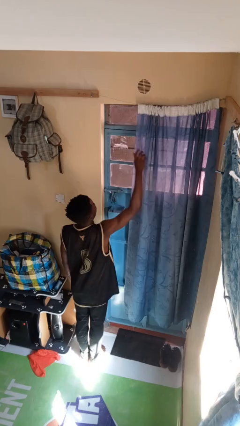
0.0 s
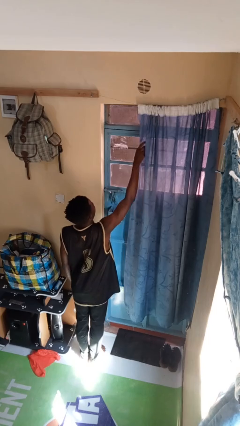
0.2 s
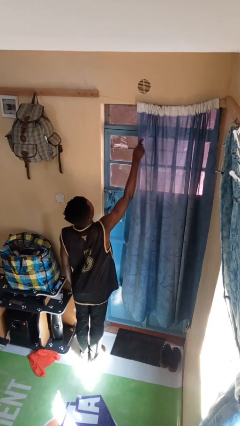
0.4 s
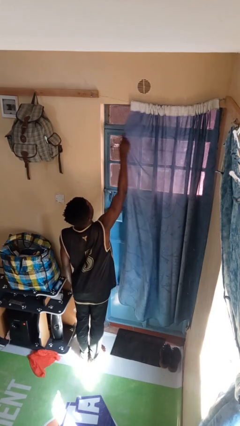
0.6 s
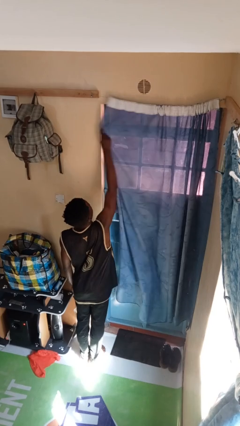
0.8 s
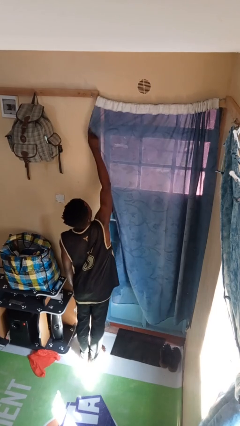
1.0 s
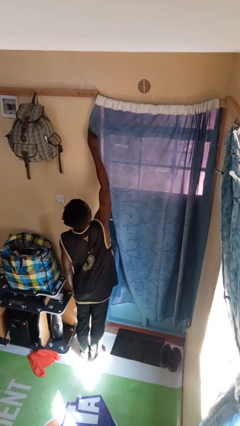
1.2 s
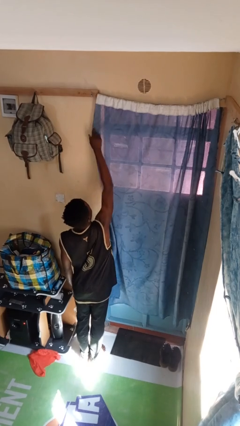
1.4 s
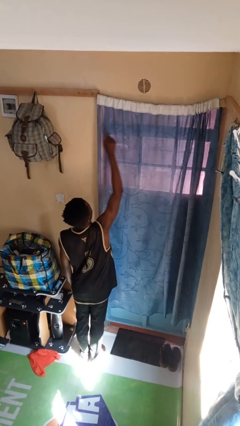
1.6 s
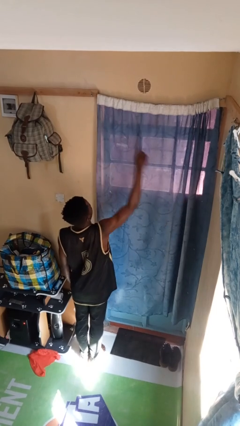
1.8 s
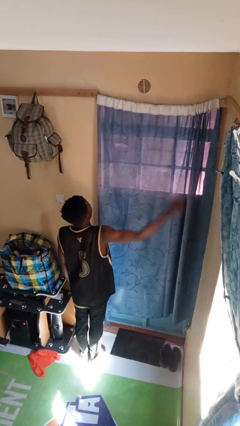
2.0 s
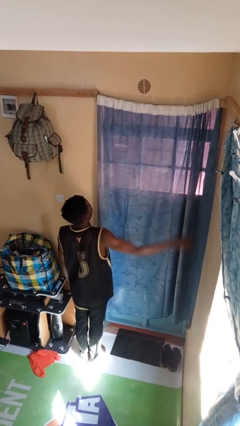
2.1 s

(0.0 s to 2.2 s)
person closes curtains

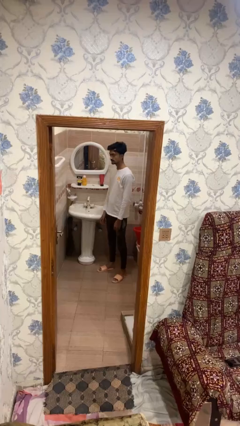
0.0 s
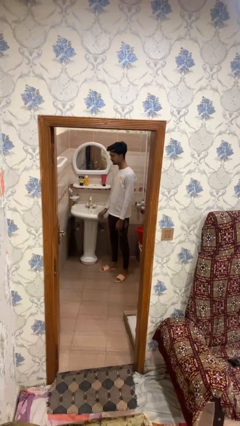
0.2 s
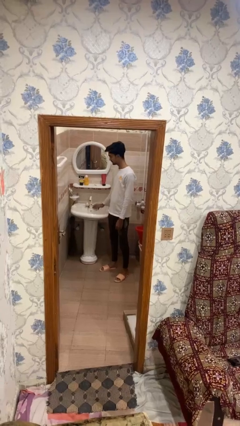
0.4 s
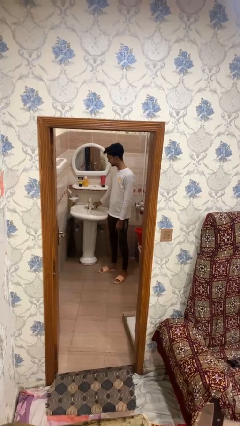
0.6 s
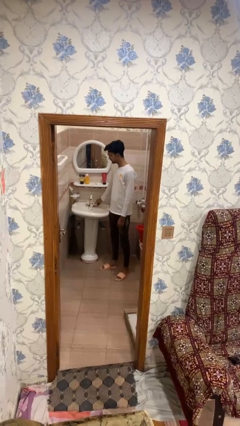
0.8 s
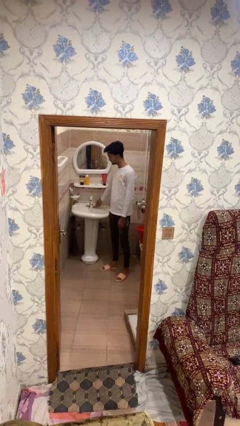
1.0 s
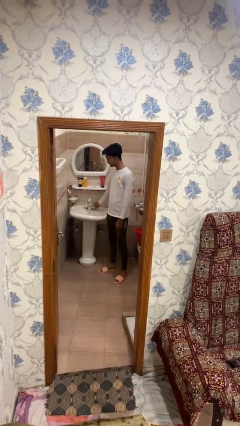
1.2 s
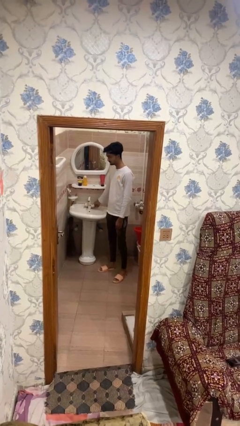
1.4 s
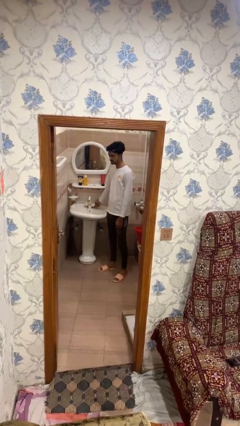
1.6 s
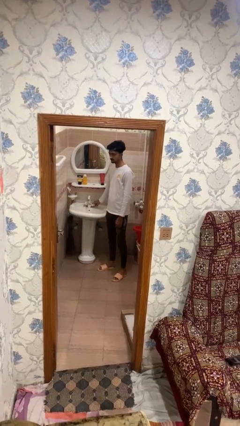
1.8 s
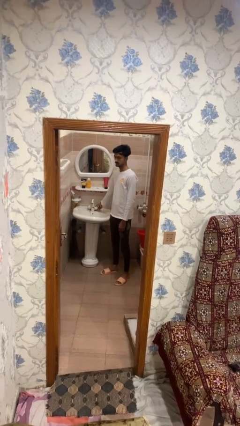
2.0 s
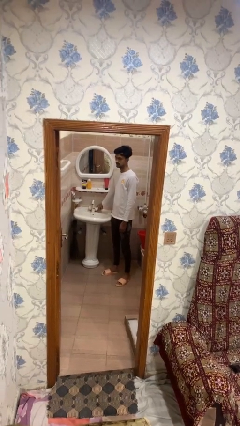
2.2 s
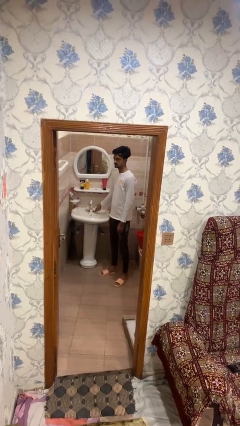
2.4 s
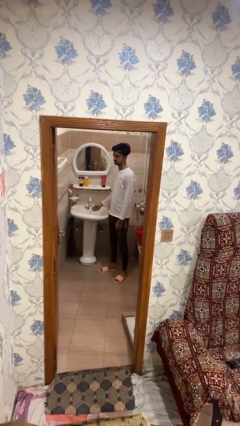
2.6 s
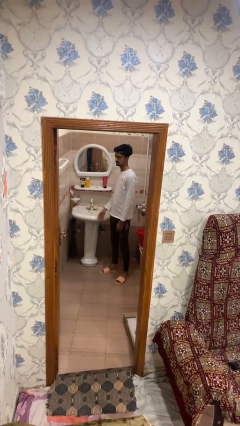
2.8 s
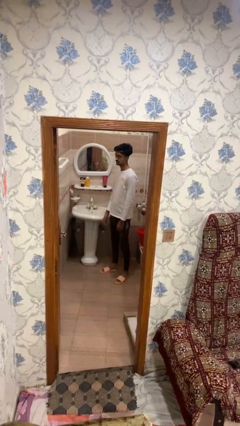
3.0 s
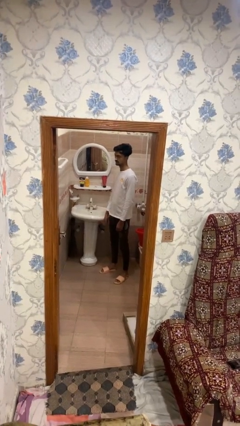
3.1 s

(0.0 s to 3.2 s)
person turns off faucet

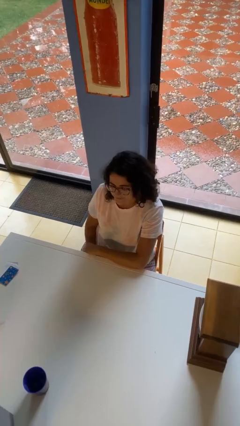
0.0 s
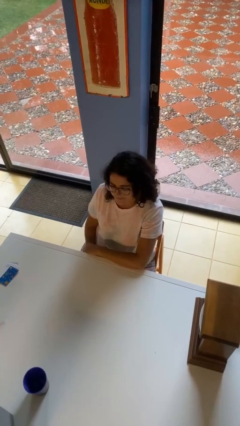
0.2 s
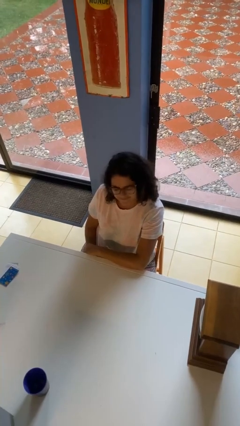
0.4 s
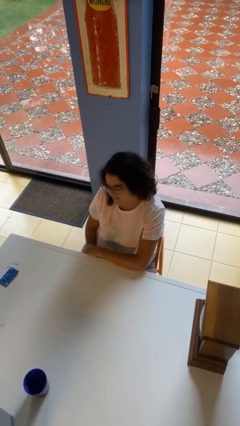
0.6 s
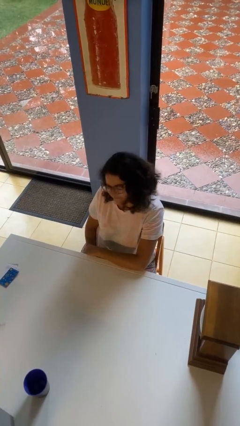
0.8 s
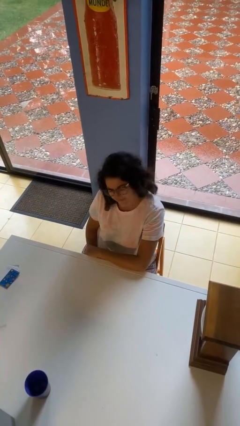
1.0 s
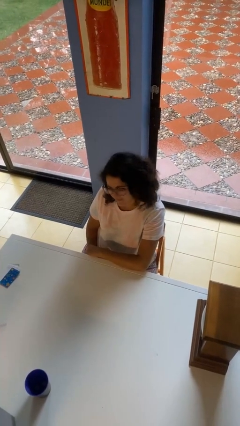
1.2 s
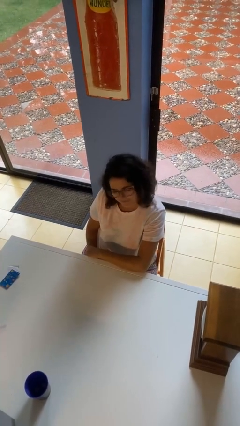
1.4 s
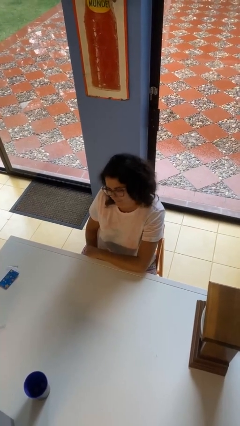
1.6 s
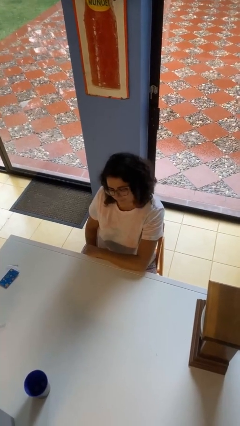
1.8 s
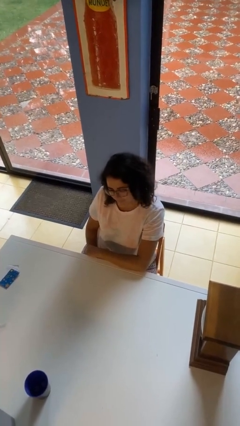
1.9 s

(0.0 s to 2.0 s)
person shakes head

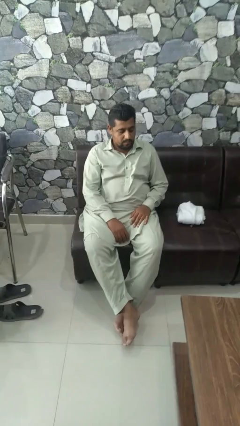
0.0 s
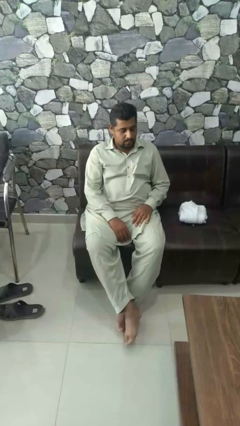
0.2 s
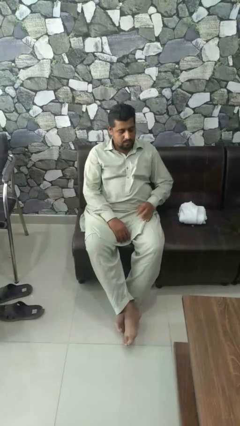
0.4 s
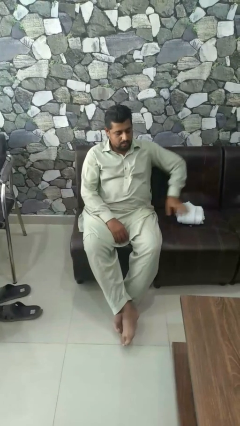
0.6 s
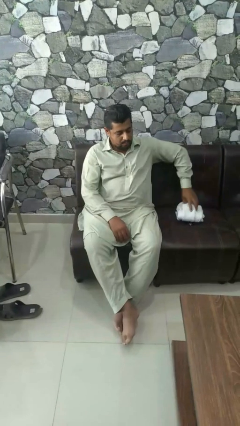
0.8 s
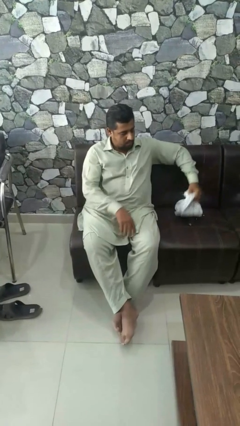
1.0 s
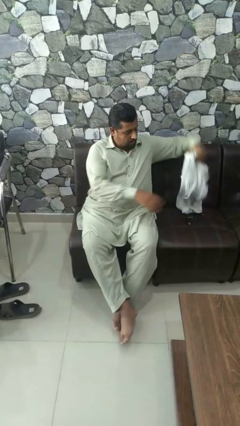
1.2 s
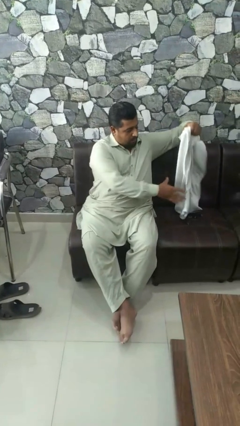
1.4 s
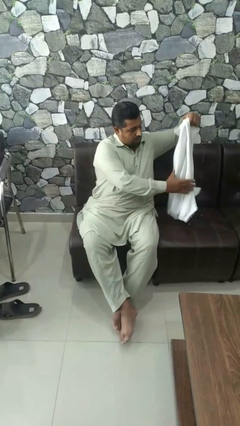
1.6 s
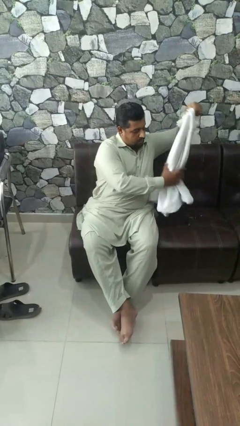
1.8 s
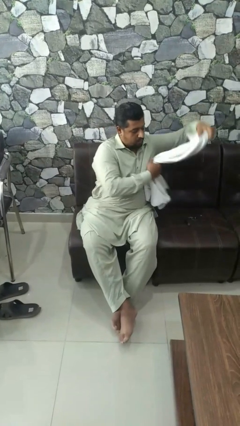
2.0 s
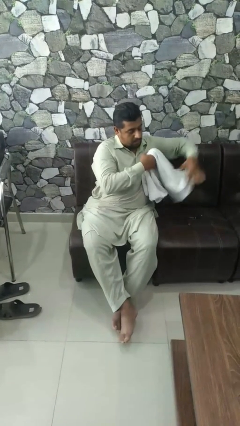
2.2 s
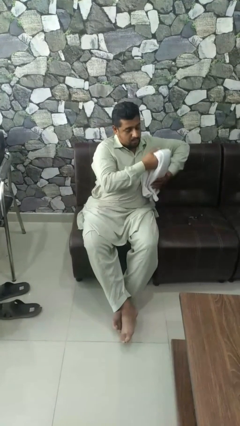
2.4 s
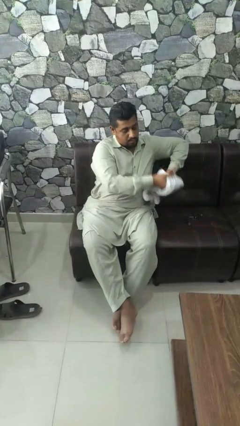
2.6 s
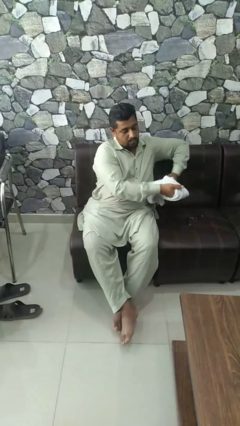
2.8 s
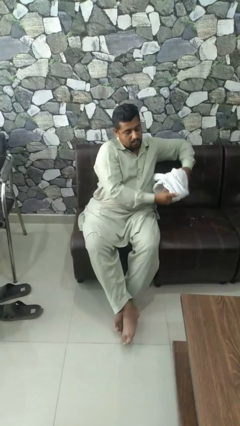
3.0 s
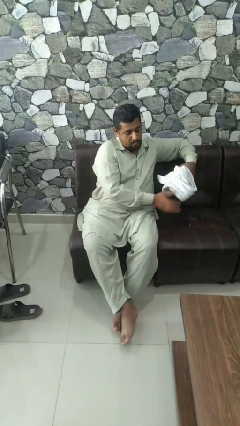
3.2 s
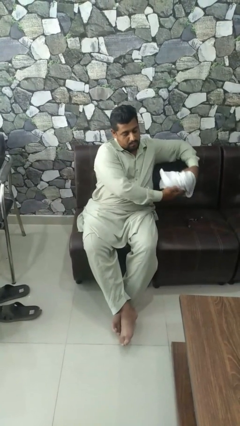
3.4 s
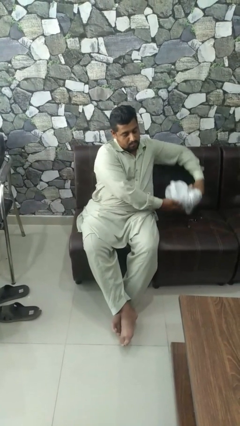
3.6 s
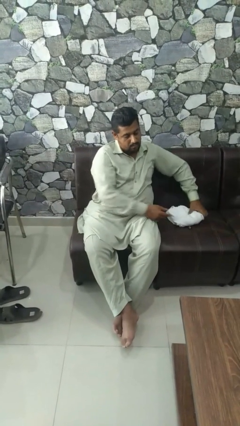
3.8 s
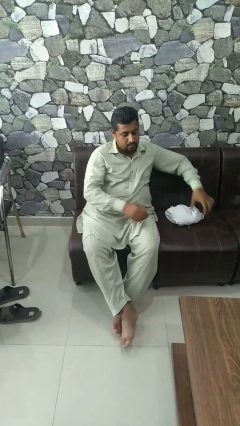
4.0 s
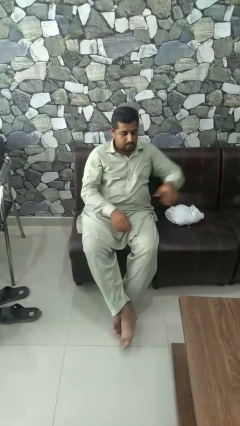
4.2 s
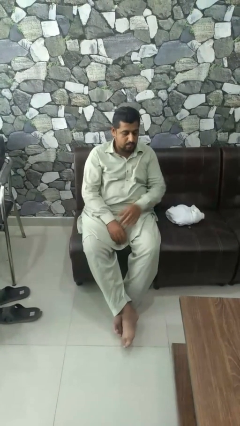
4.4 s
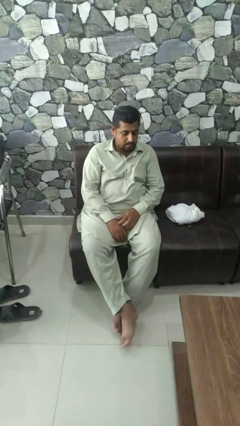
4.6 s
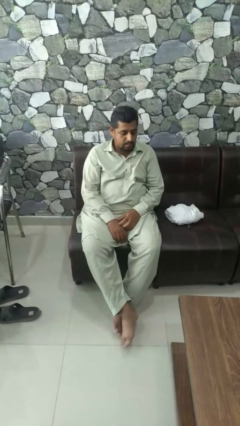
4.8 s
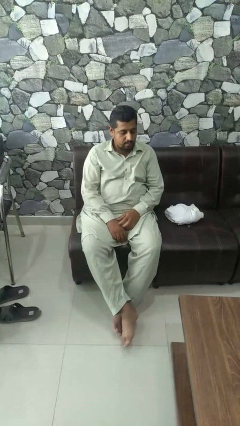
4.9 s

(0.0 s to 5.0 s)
person folds shirt

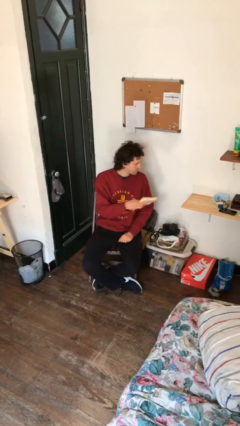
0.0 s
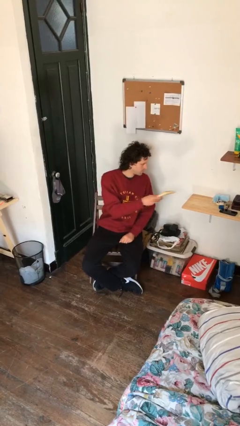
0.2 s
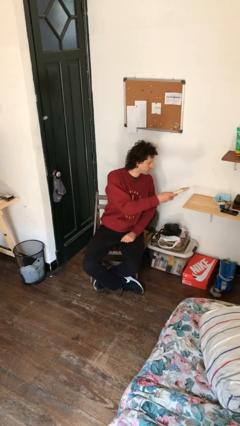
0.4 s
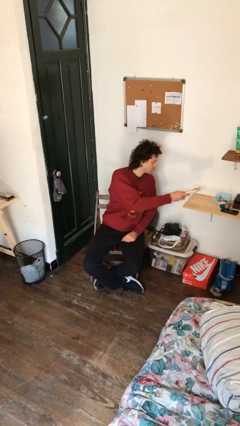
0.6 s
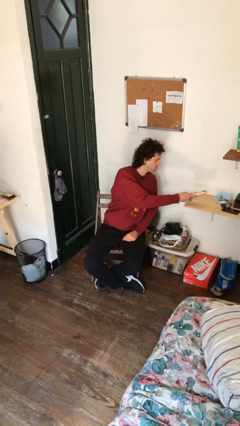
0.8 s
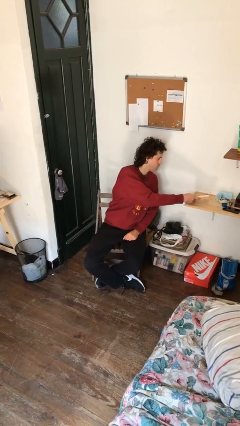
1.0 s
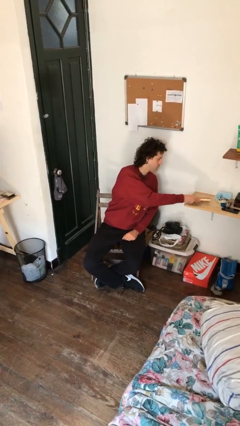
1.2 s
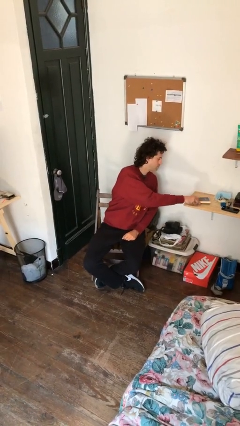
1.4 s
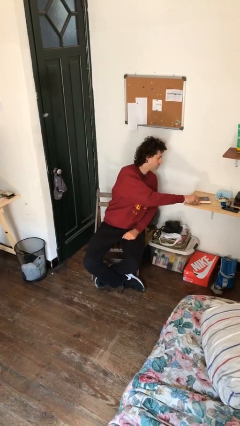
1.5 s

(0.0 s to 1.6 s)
person puts down object on table

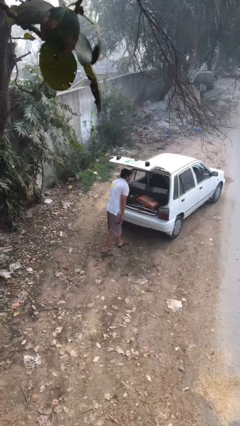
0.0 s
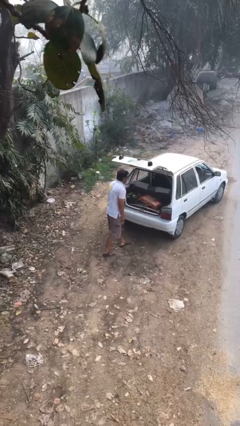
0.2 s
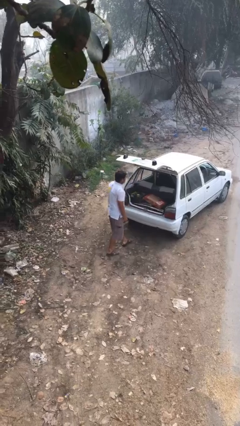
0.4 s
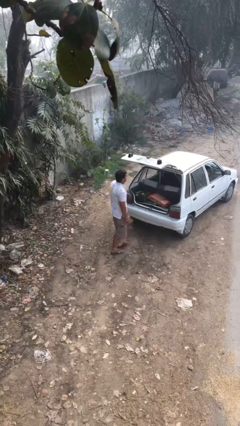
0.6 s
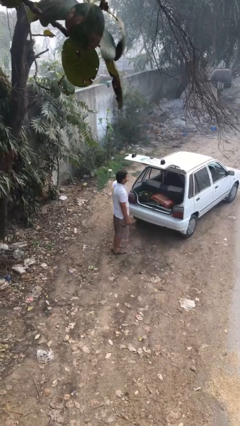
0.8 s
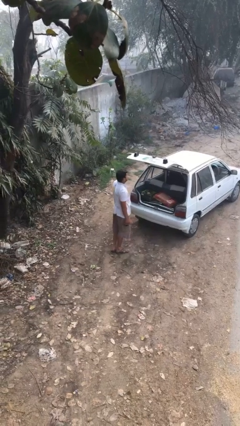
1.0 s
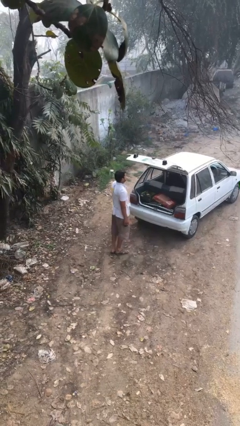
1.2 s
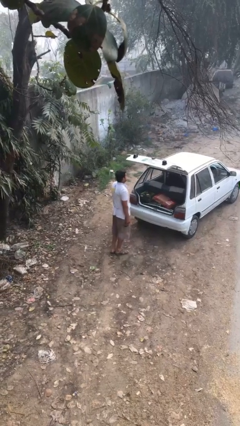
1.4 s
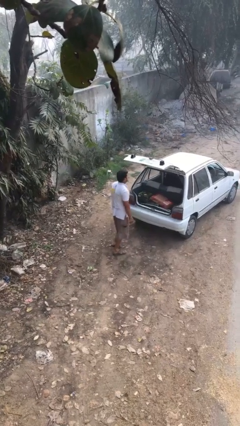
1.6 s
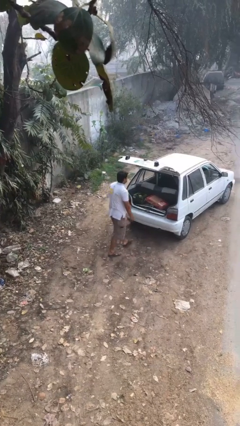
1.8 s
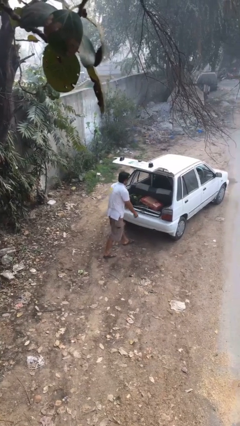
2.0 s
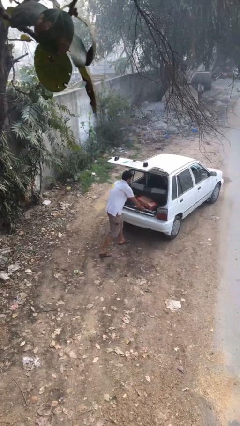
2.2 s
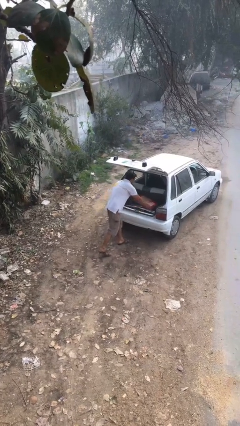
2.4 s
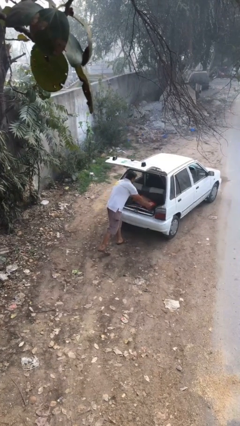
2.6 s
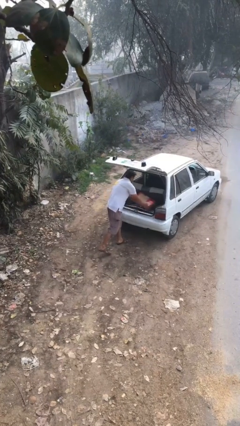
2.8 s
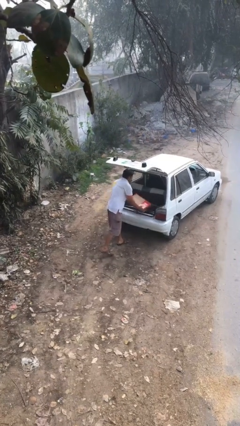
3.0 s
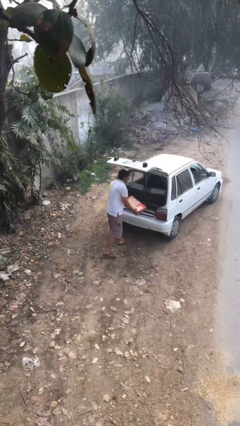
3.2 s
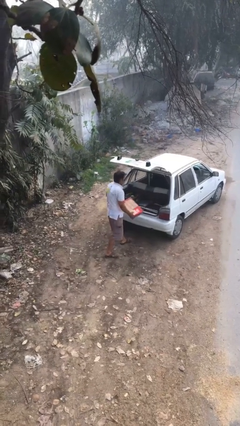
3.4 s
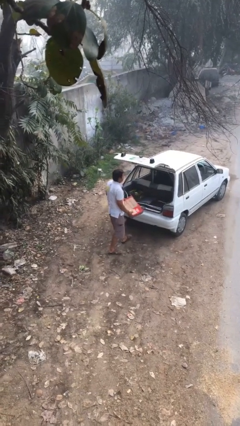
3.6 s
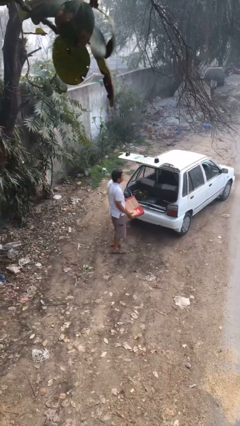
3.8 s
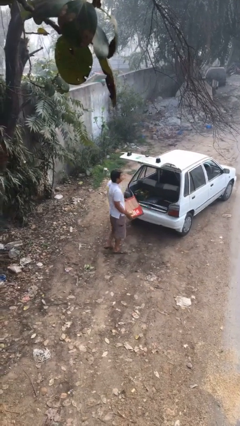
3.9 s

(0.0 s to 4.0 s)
person unloads car
